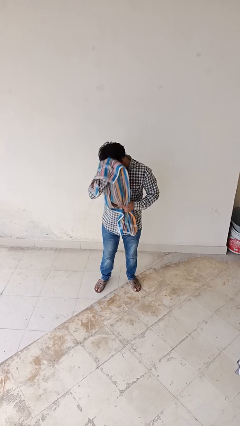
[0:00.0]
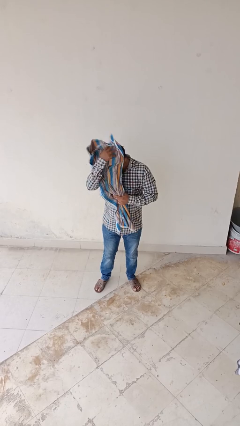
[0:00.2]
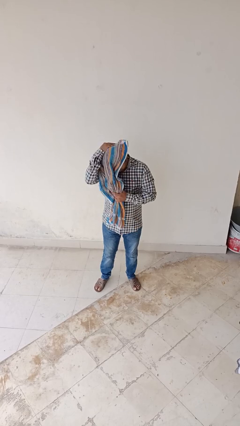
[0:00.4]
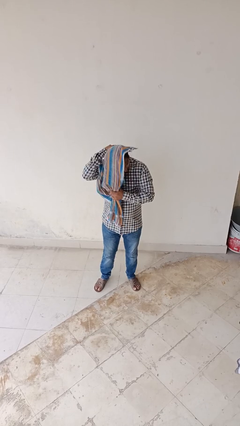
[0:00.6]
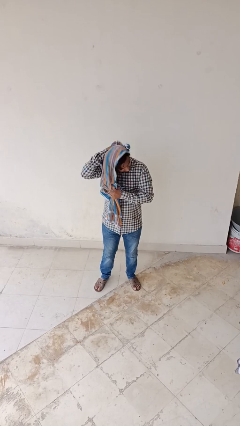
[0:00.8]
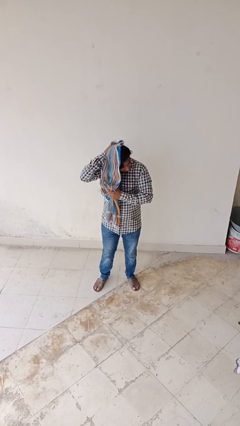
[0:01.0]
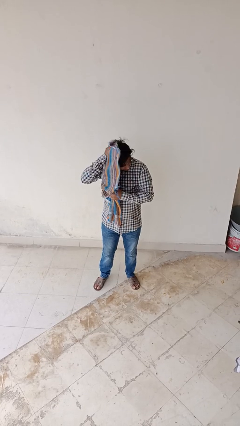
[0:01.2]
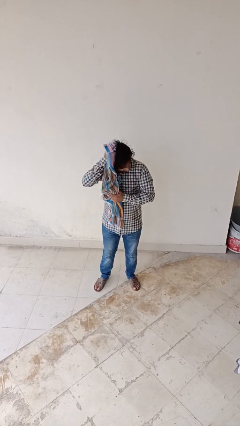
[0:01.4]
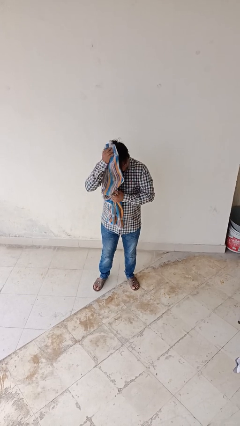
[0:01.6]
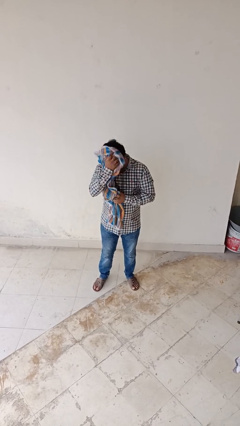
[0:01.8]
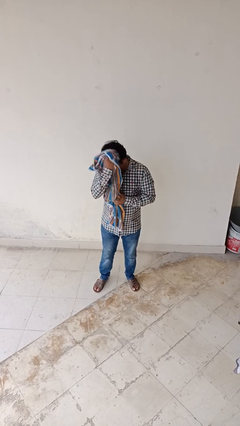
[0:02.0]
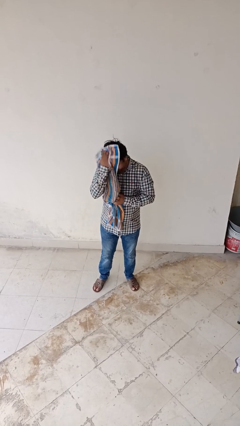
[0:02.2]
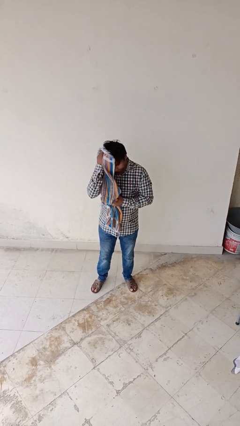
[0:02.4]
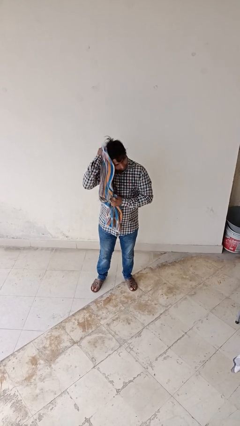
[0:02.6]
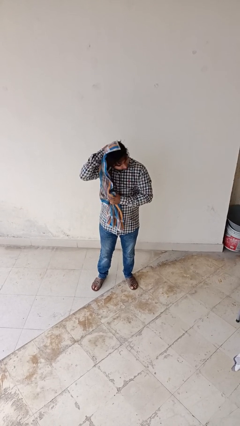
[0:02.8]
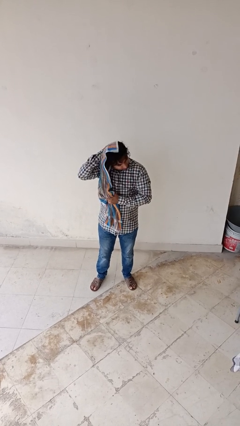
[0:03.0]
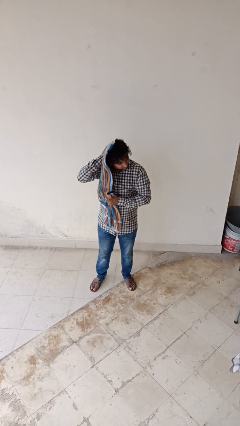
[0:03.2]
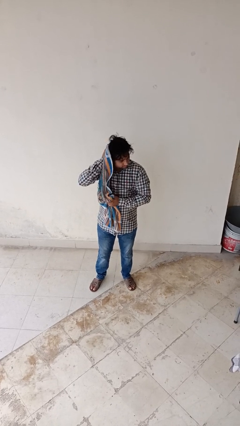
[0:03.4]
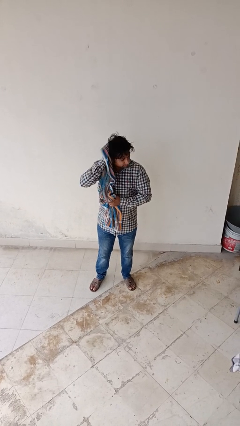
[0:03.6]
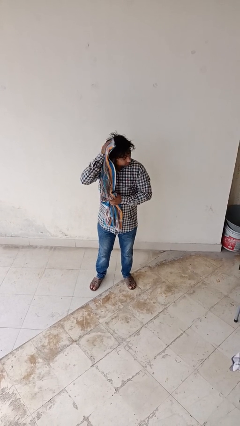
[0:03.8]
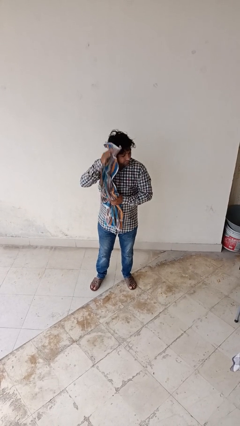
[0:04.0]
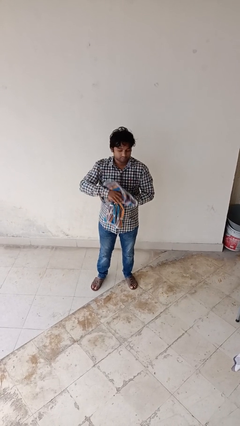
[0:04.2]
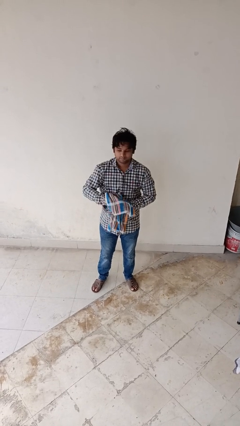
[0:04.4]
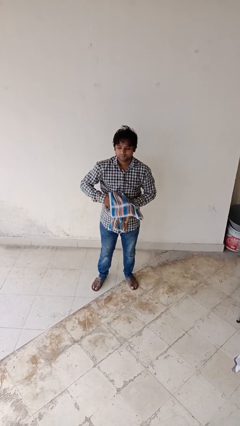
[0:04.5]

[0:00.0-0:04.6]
person dries hair with towel

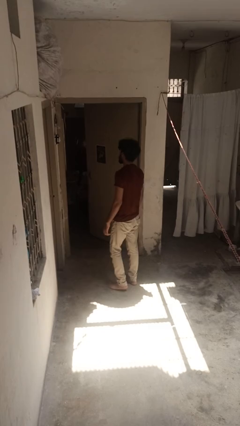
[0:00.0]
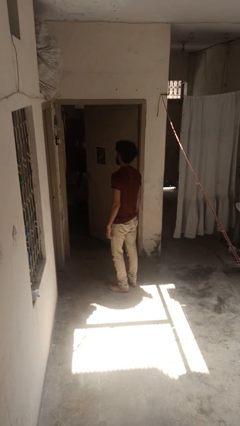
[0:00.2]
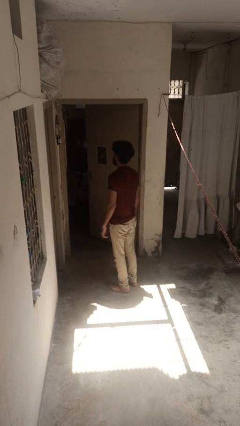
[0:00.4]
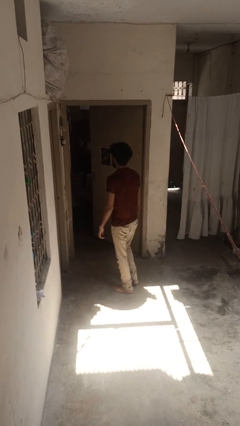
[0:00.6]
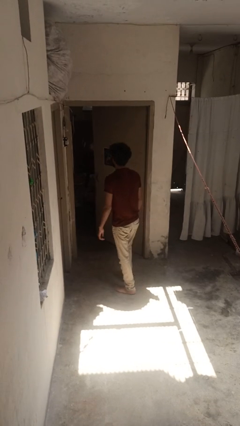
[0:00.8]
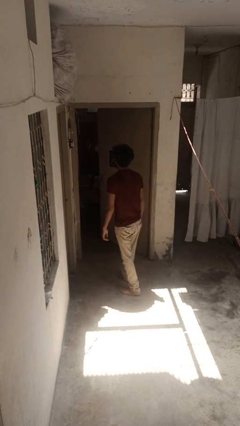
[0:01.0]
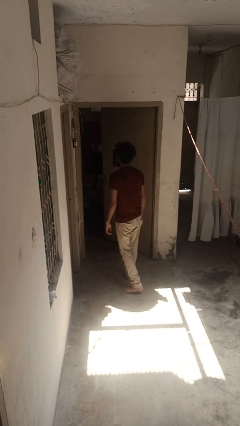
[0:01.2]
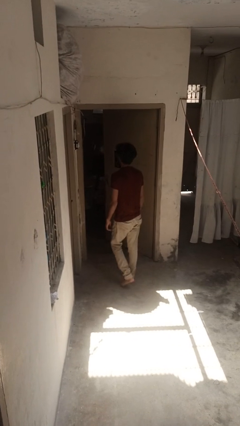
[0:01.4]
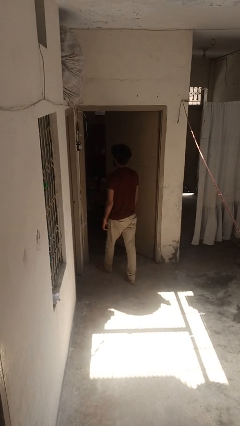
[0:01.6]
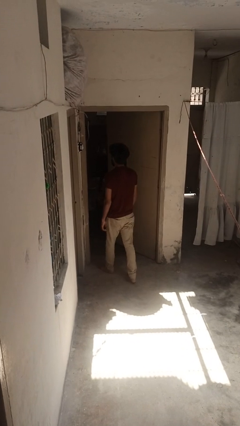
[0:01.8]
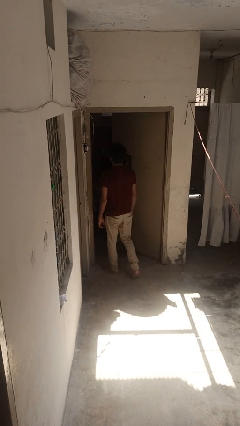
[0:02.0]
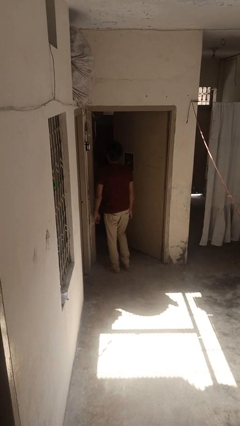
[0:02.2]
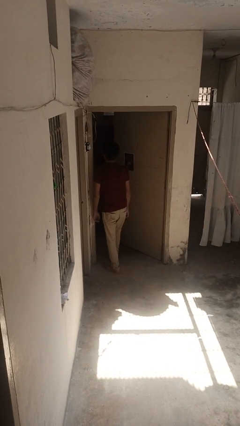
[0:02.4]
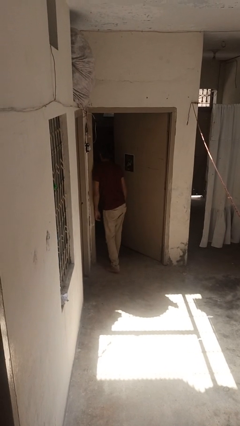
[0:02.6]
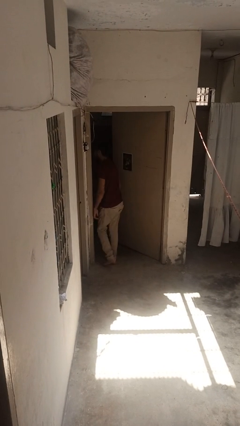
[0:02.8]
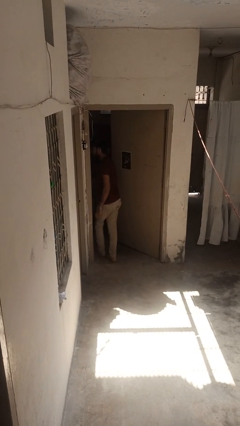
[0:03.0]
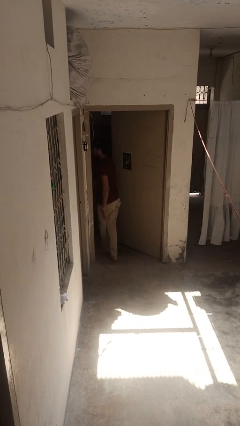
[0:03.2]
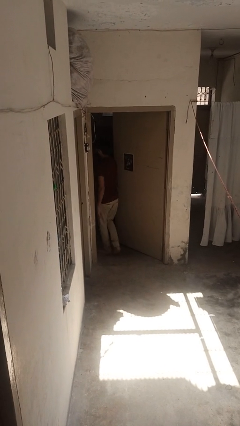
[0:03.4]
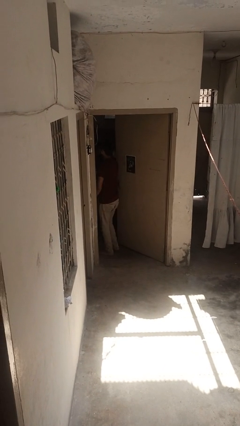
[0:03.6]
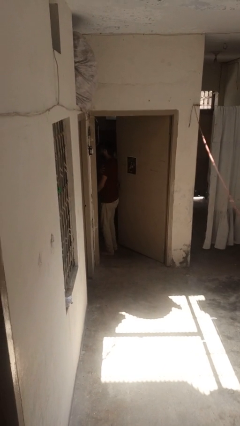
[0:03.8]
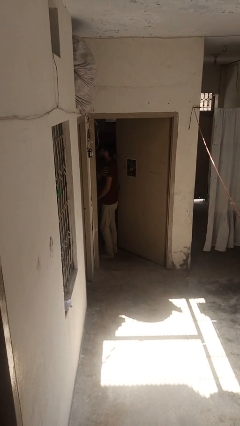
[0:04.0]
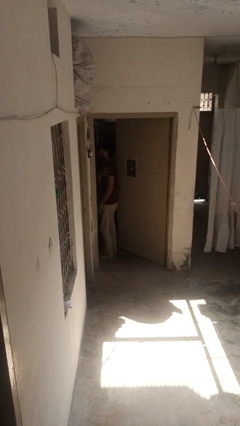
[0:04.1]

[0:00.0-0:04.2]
person bumps into wall

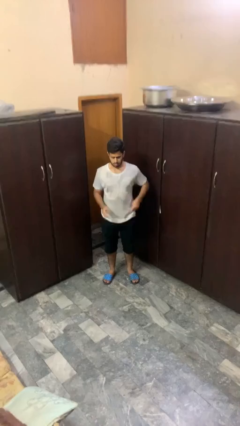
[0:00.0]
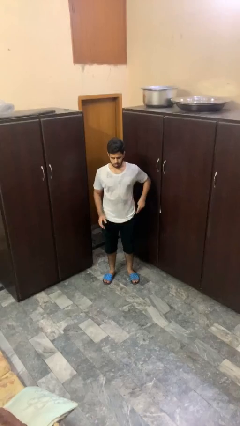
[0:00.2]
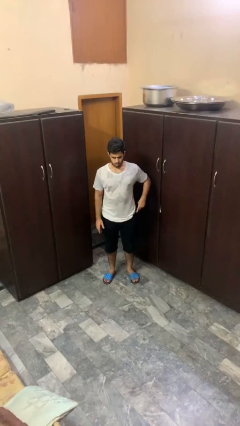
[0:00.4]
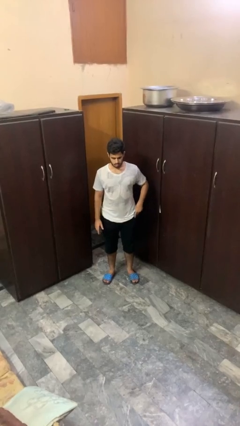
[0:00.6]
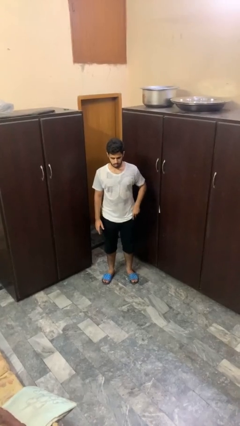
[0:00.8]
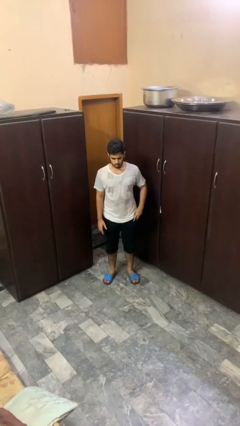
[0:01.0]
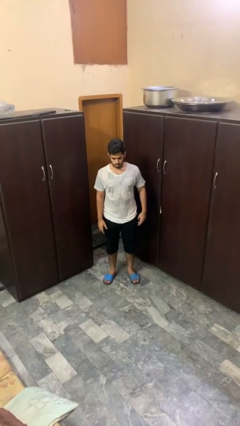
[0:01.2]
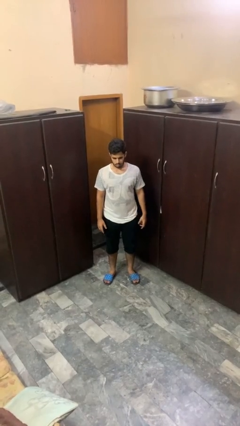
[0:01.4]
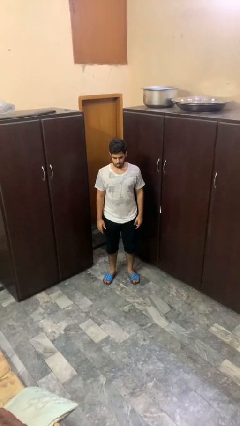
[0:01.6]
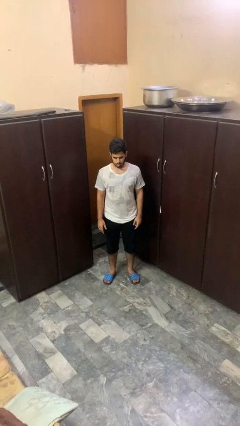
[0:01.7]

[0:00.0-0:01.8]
person puts phone into pocket

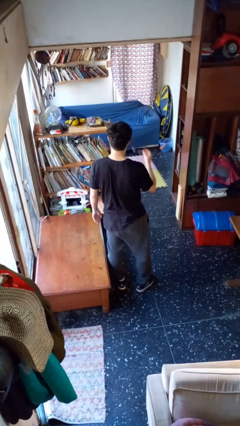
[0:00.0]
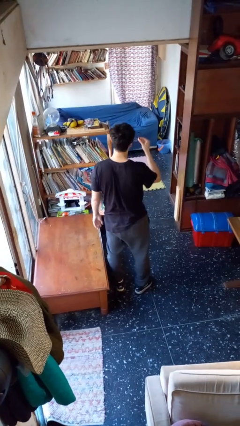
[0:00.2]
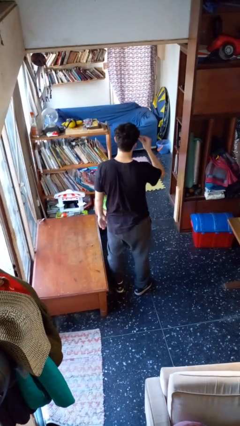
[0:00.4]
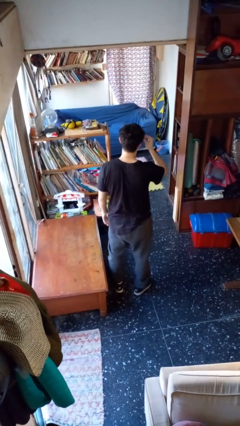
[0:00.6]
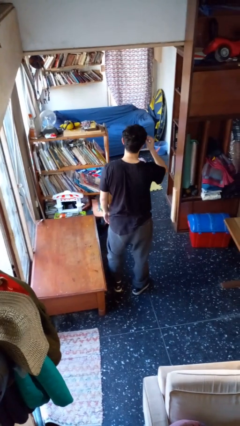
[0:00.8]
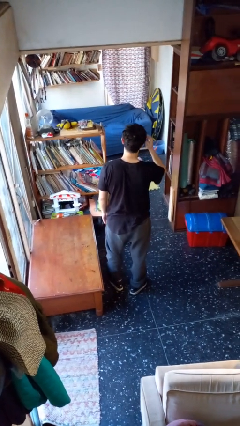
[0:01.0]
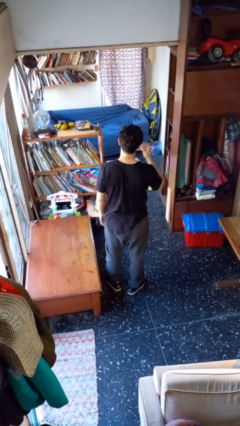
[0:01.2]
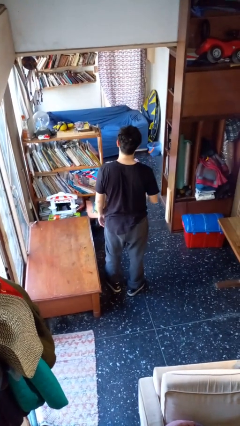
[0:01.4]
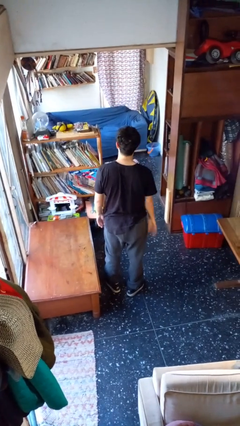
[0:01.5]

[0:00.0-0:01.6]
person puts on glasses

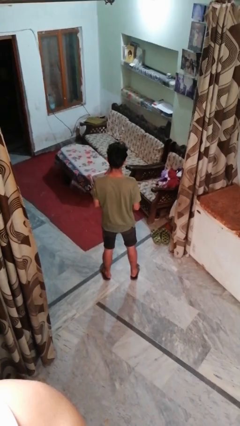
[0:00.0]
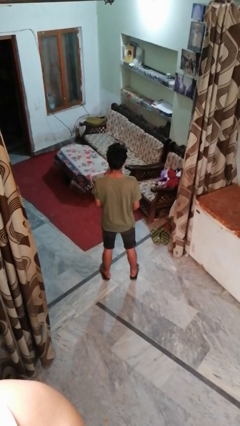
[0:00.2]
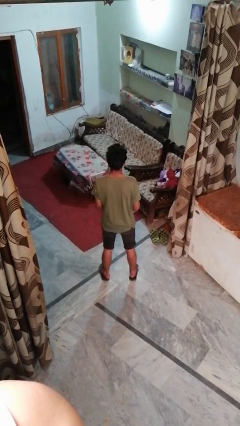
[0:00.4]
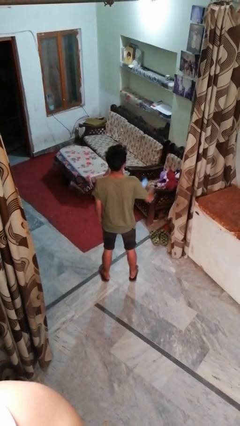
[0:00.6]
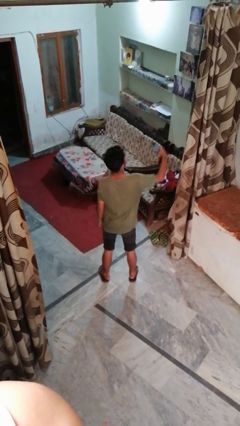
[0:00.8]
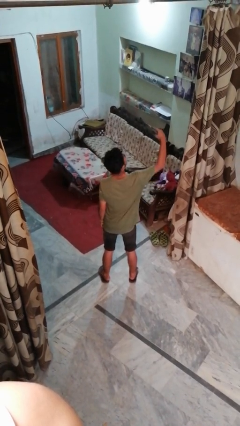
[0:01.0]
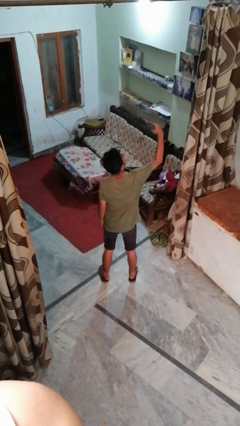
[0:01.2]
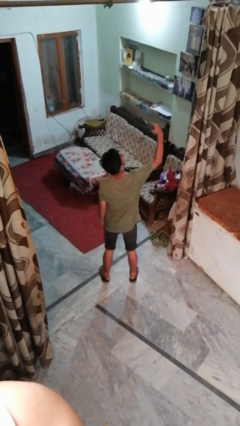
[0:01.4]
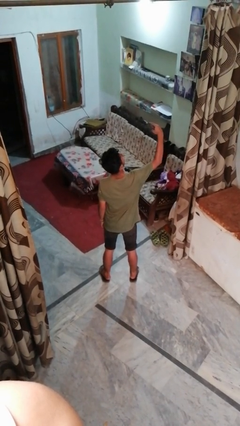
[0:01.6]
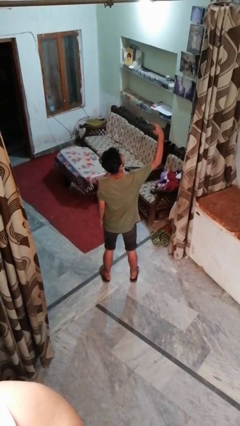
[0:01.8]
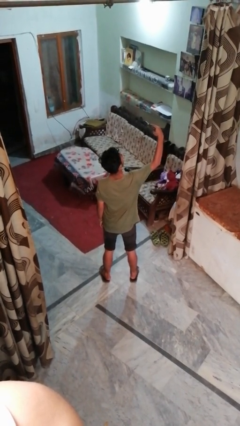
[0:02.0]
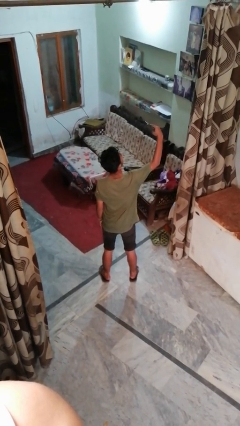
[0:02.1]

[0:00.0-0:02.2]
person takes selfie

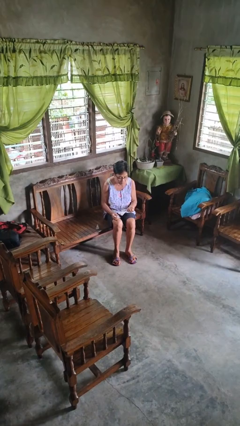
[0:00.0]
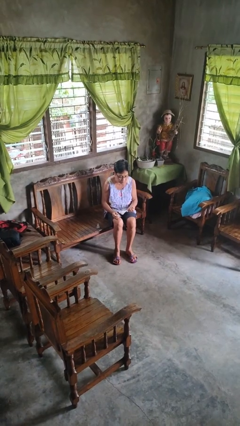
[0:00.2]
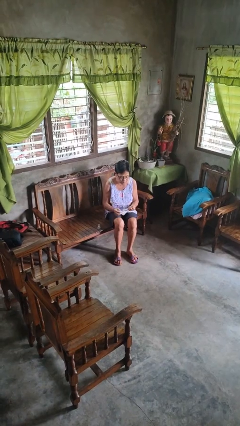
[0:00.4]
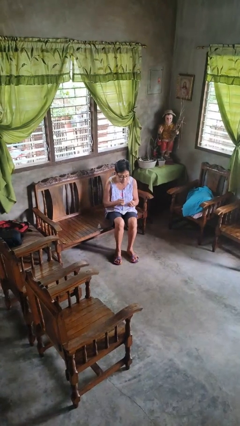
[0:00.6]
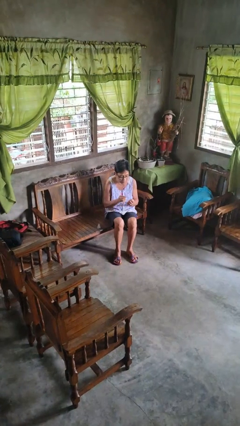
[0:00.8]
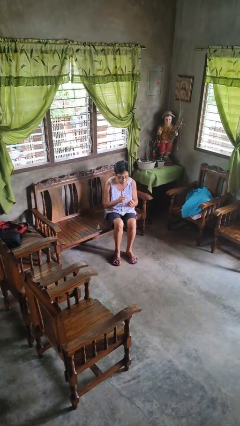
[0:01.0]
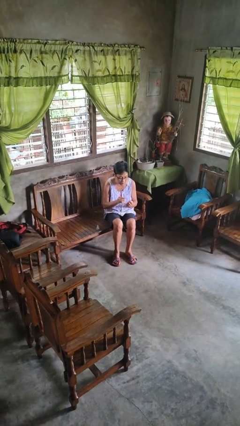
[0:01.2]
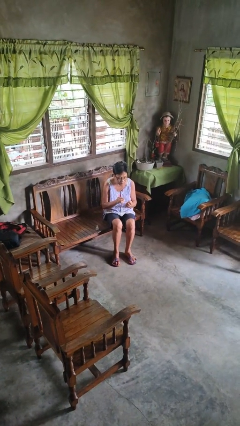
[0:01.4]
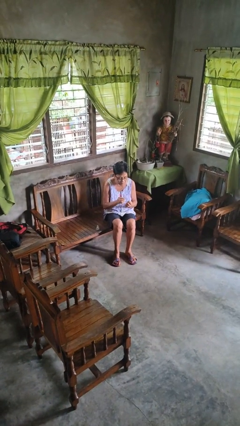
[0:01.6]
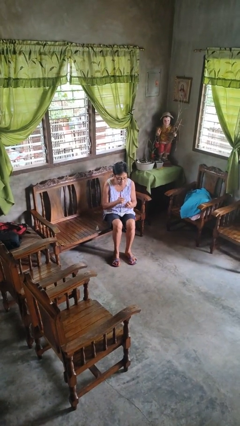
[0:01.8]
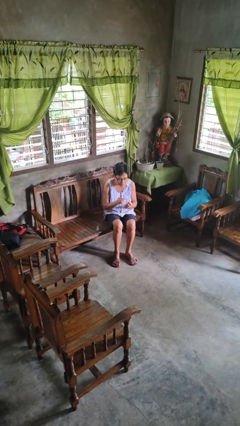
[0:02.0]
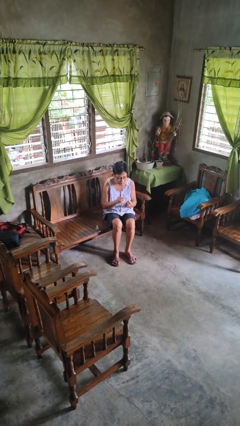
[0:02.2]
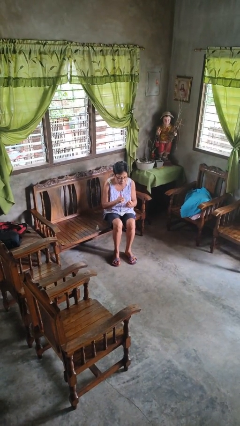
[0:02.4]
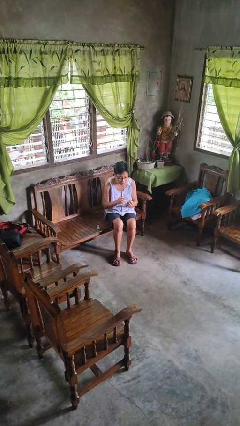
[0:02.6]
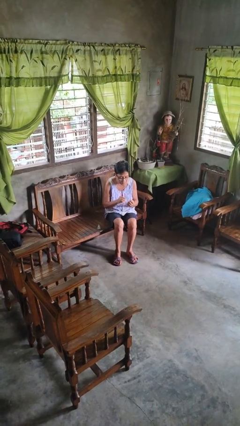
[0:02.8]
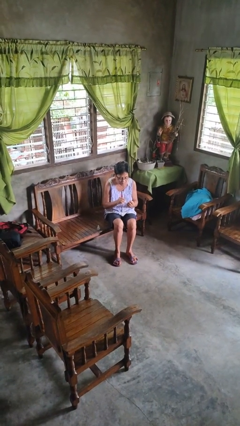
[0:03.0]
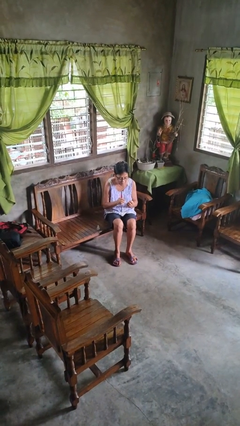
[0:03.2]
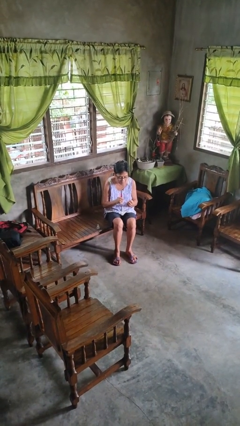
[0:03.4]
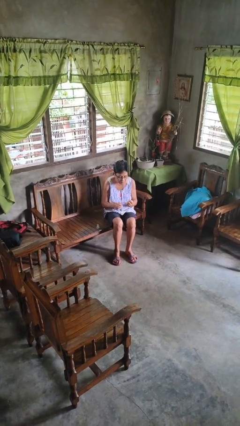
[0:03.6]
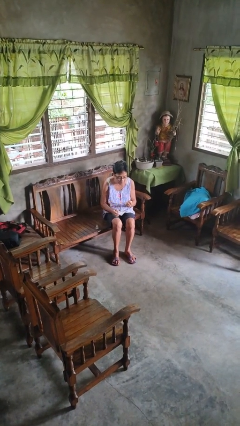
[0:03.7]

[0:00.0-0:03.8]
person paints fingernails
